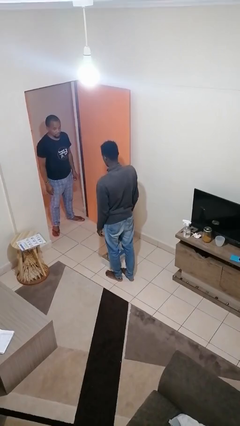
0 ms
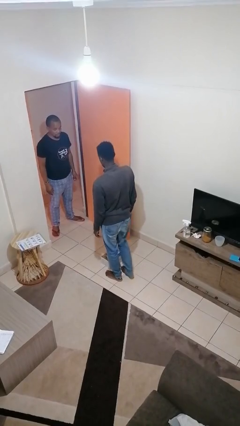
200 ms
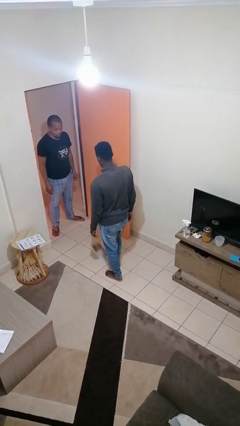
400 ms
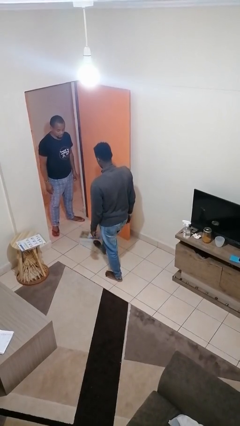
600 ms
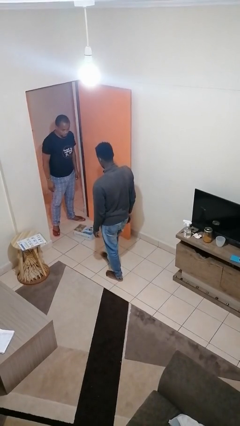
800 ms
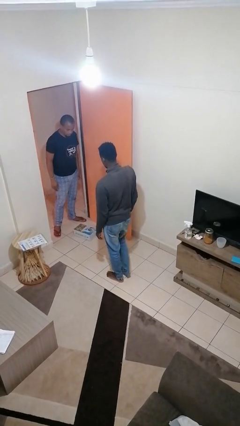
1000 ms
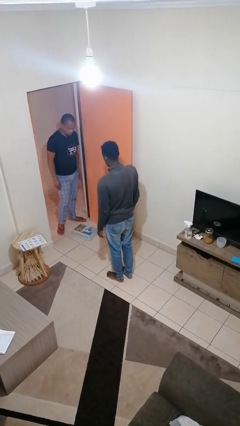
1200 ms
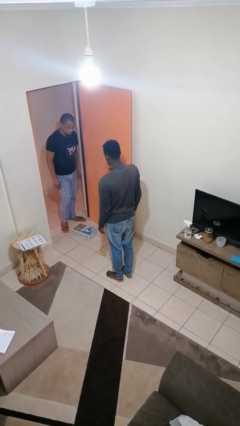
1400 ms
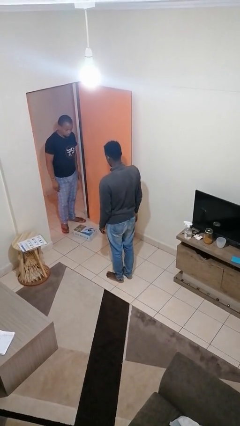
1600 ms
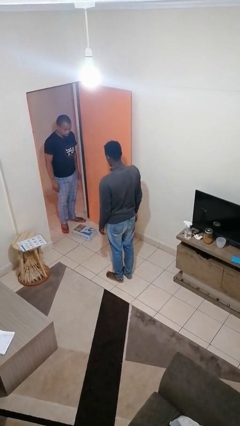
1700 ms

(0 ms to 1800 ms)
person kicks object to person

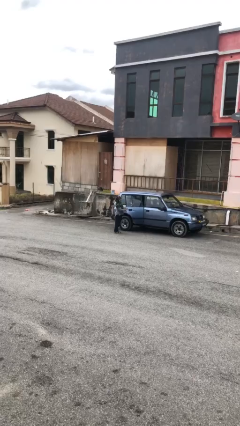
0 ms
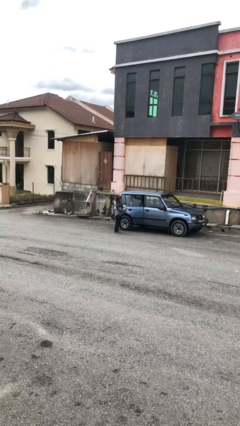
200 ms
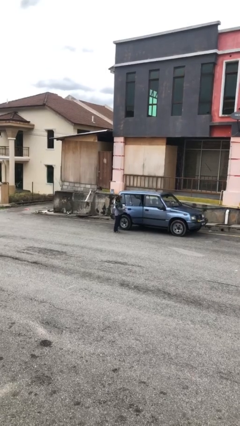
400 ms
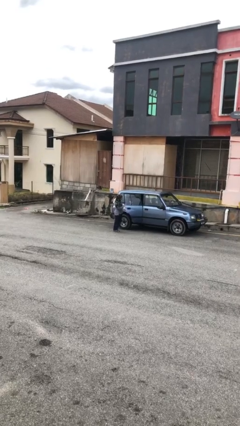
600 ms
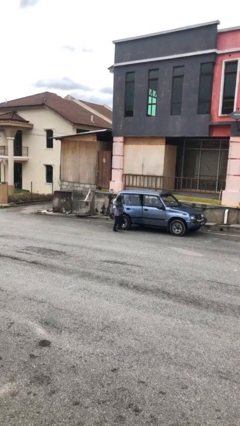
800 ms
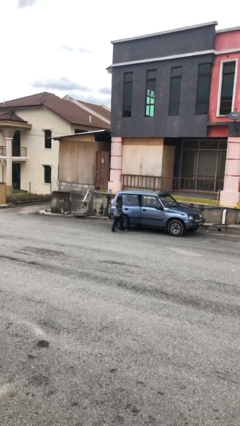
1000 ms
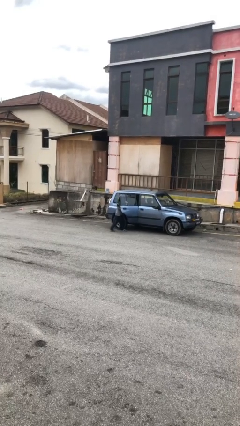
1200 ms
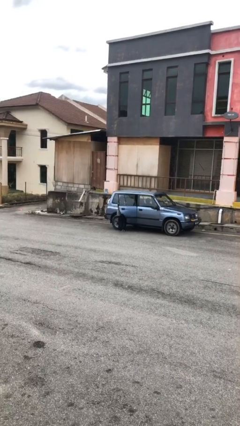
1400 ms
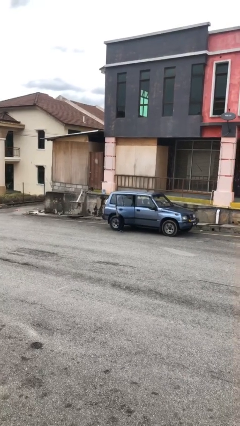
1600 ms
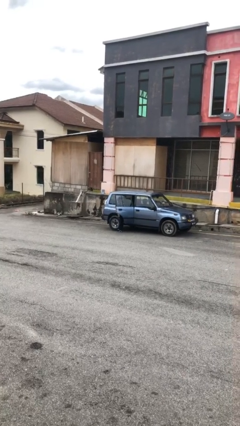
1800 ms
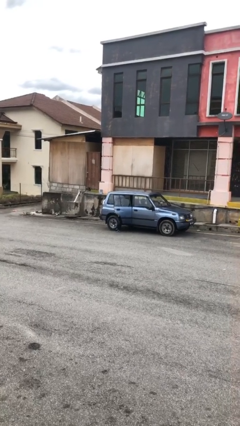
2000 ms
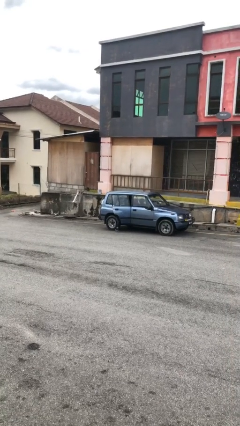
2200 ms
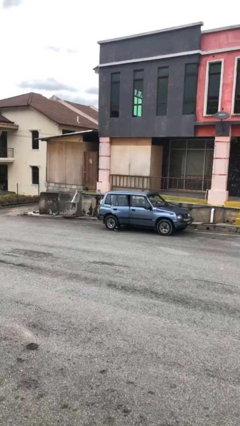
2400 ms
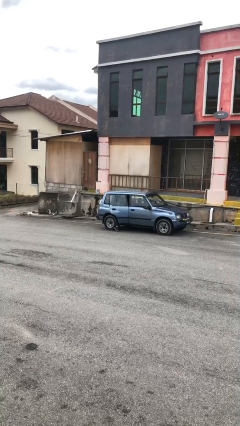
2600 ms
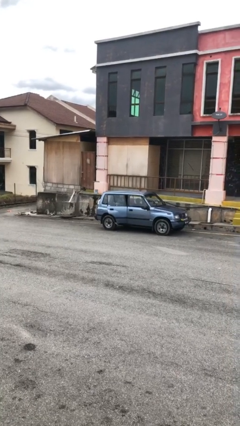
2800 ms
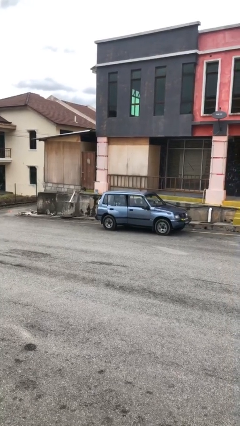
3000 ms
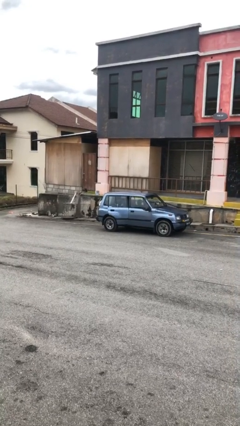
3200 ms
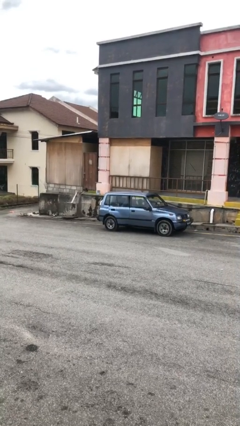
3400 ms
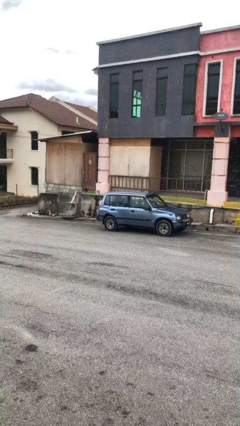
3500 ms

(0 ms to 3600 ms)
person enters car

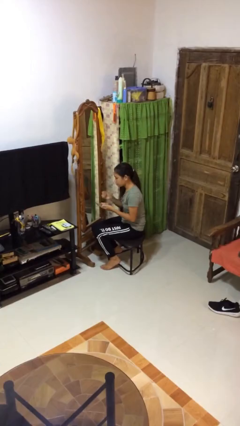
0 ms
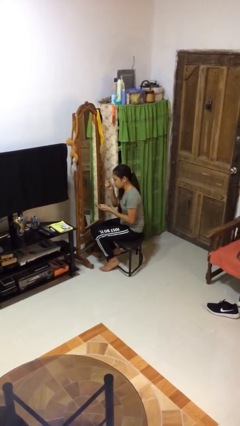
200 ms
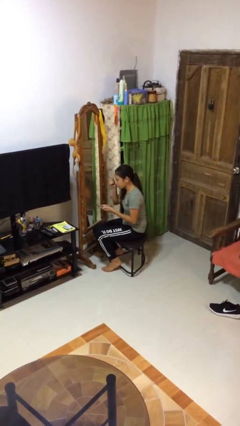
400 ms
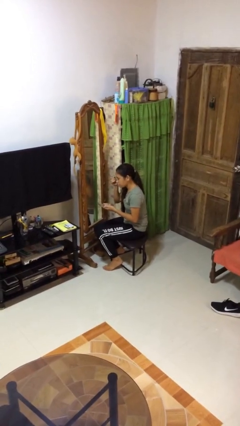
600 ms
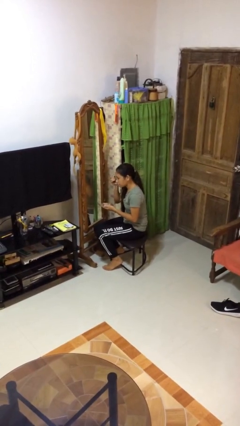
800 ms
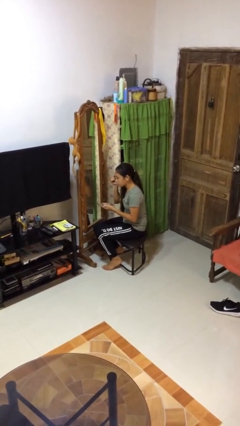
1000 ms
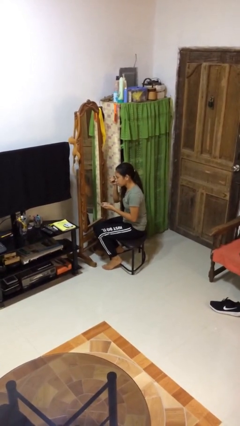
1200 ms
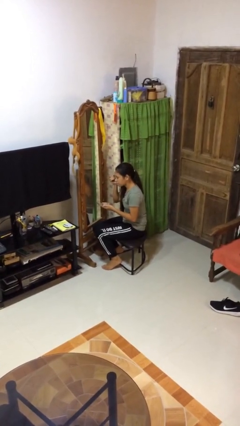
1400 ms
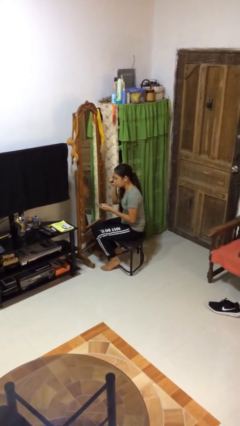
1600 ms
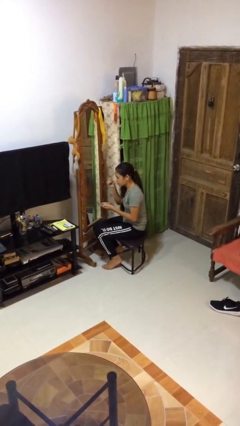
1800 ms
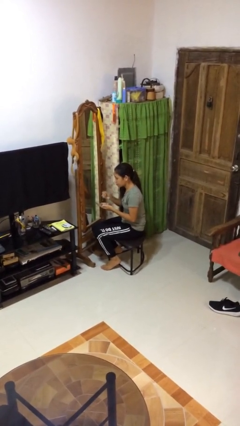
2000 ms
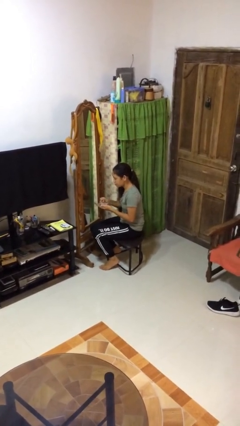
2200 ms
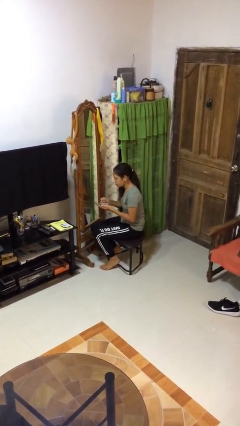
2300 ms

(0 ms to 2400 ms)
person applies eye makeup

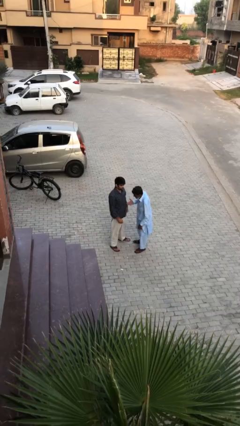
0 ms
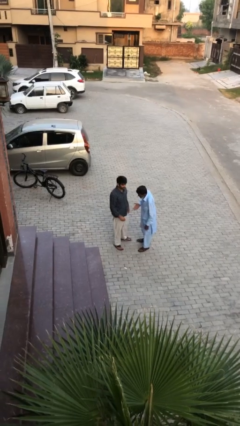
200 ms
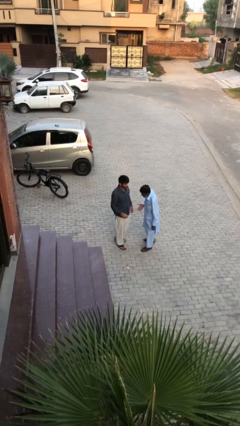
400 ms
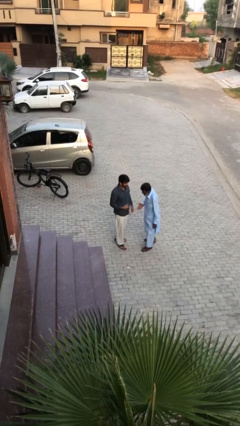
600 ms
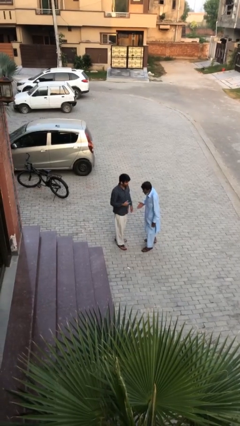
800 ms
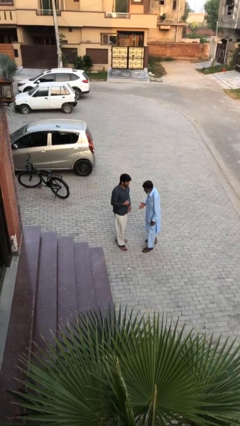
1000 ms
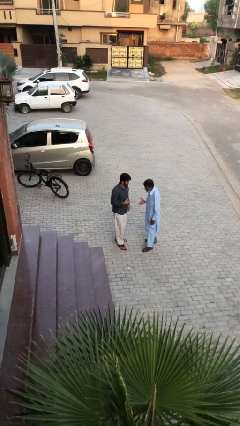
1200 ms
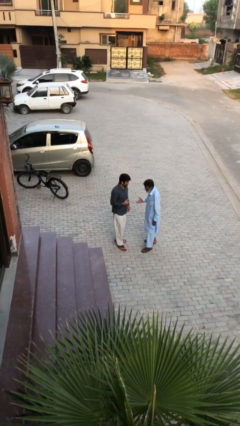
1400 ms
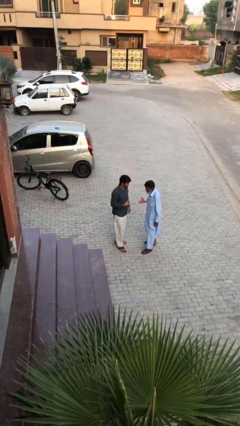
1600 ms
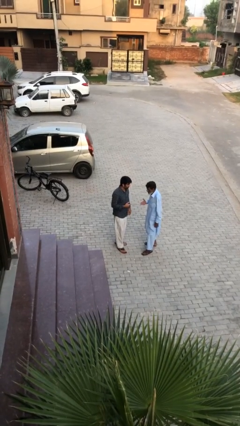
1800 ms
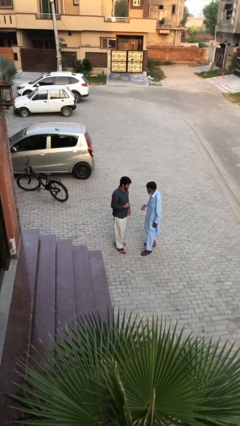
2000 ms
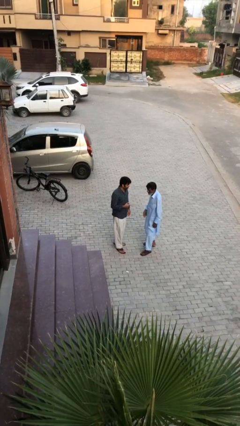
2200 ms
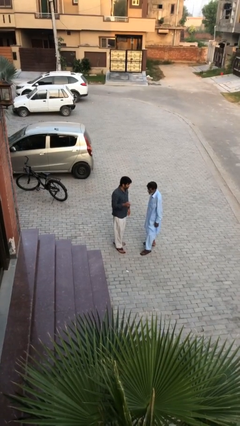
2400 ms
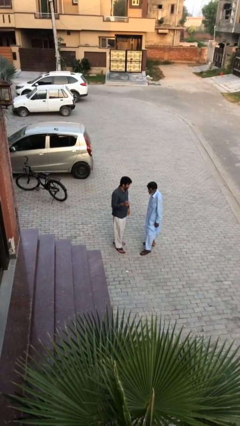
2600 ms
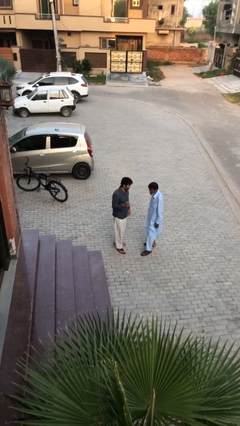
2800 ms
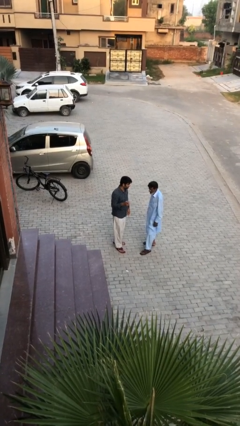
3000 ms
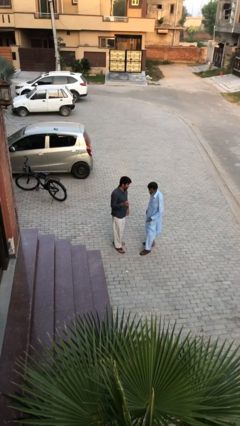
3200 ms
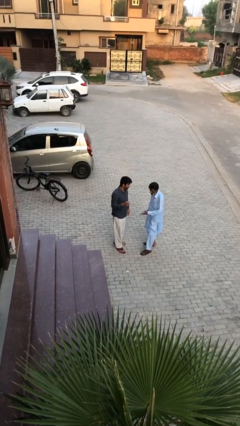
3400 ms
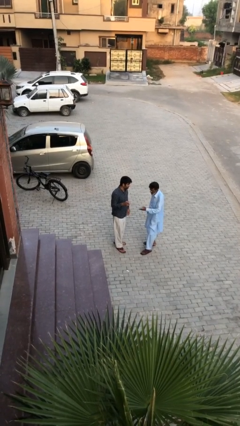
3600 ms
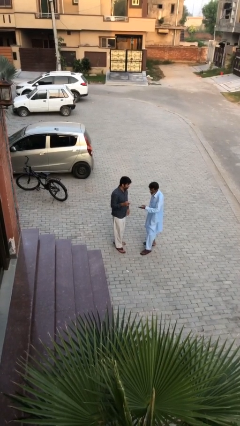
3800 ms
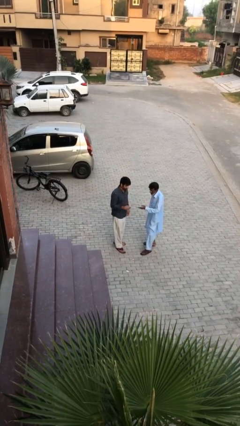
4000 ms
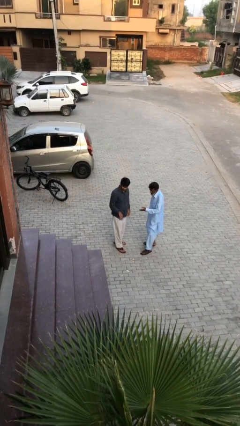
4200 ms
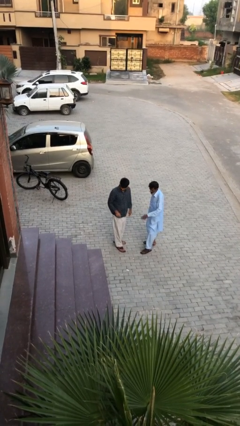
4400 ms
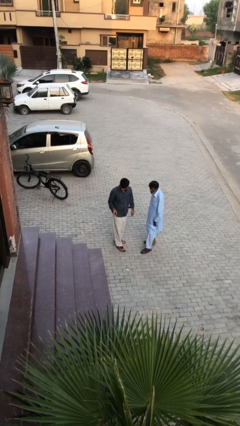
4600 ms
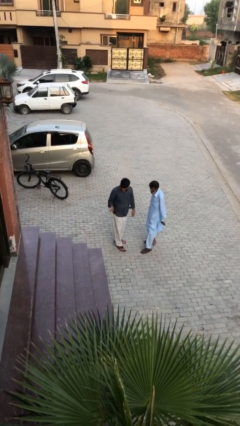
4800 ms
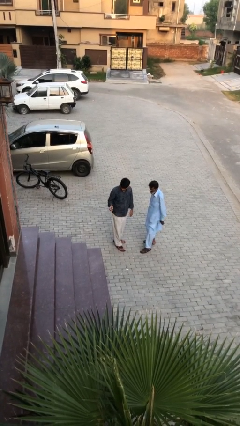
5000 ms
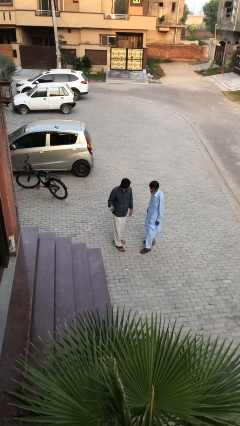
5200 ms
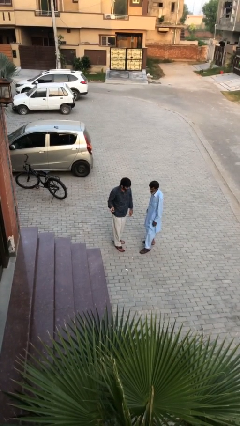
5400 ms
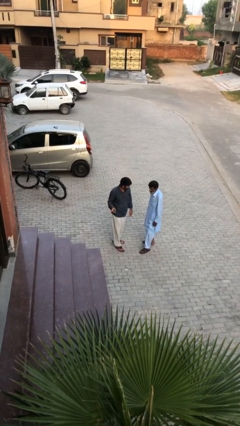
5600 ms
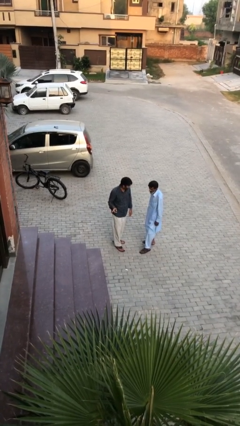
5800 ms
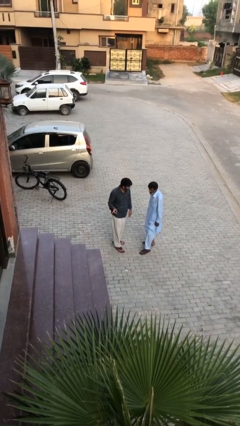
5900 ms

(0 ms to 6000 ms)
person talks to person

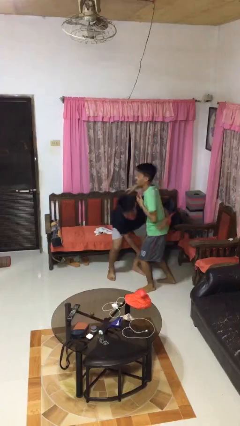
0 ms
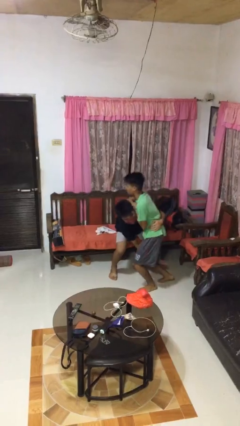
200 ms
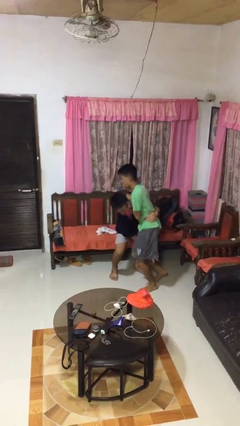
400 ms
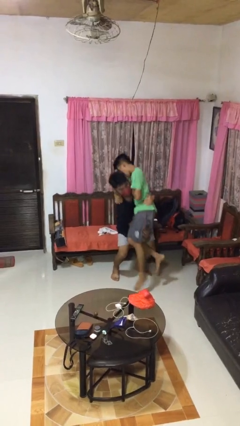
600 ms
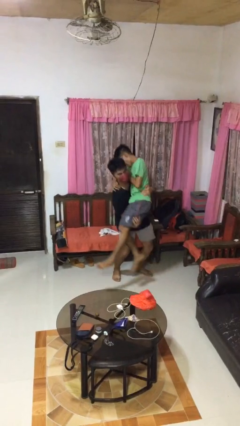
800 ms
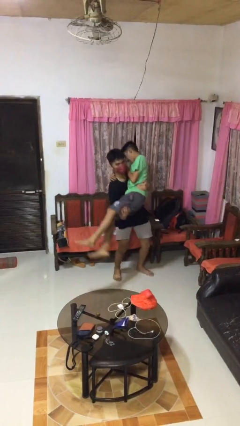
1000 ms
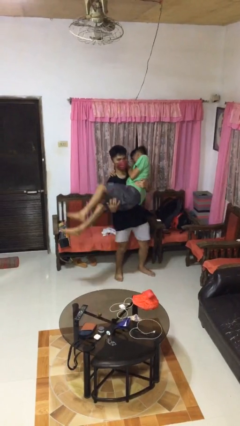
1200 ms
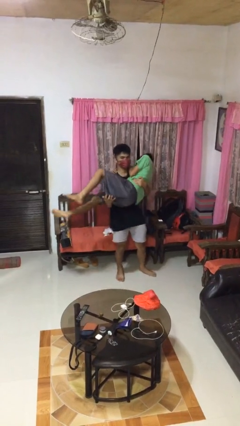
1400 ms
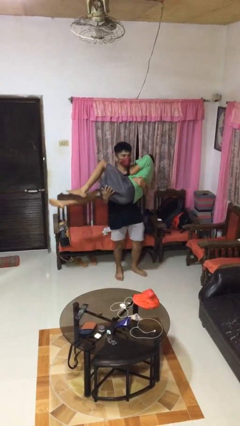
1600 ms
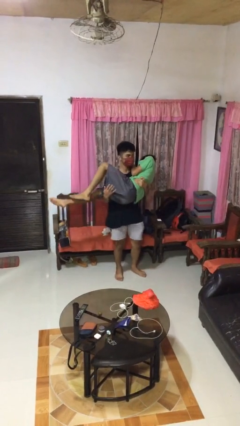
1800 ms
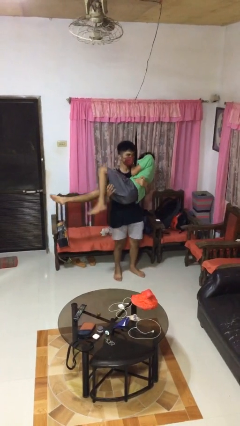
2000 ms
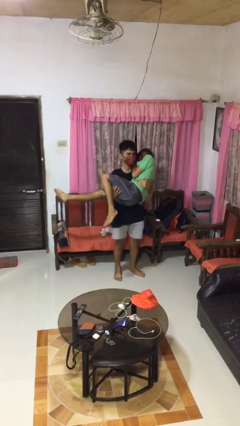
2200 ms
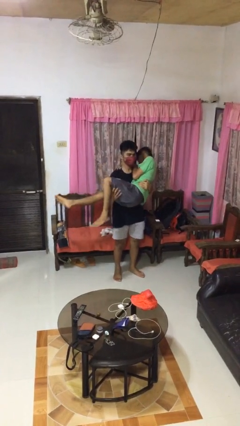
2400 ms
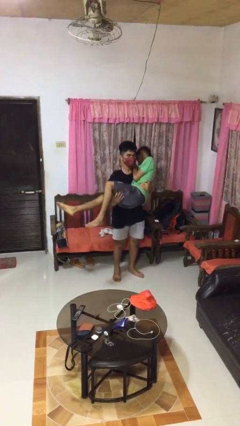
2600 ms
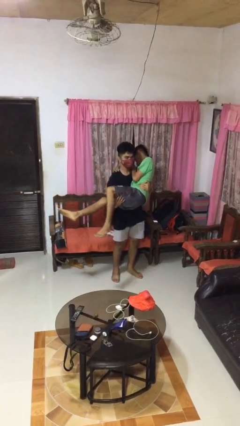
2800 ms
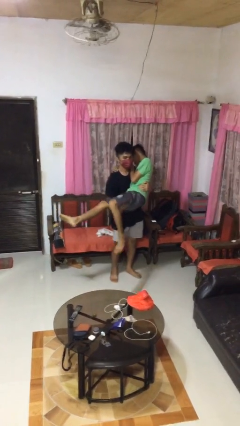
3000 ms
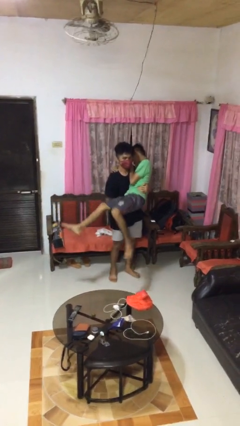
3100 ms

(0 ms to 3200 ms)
person picks up person

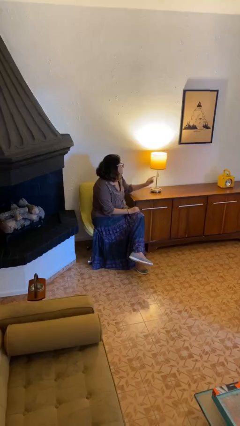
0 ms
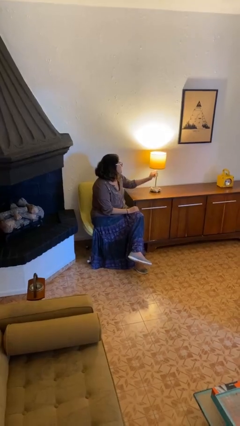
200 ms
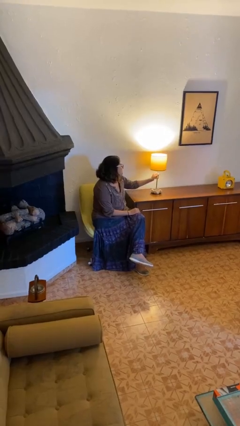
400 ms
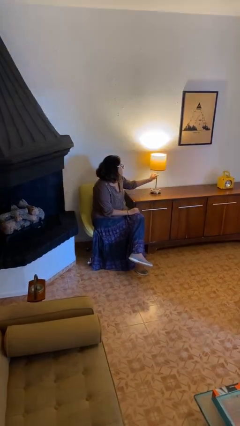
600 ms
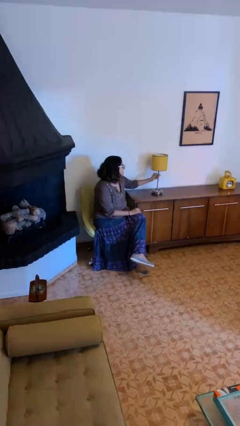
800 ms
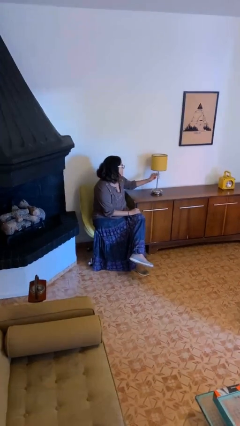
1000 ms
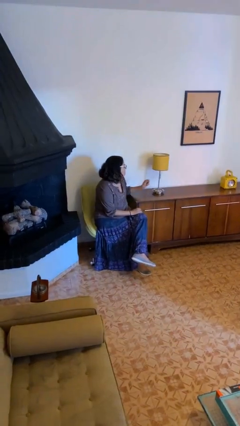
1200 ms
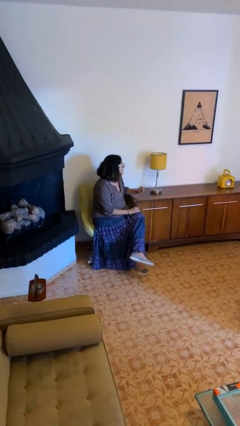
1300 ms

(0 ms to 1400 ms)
person turns off lamp
